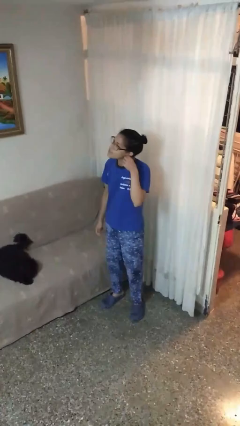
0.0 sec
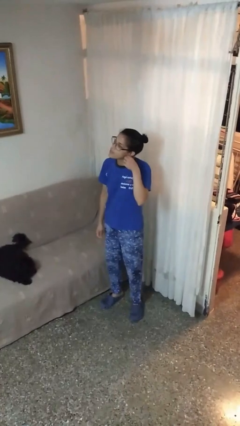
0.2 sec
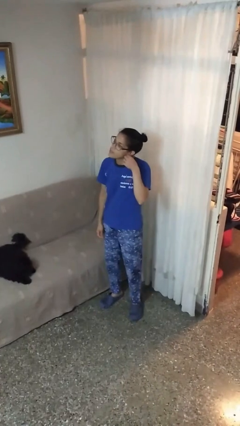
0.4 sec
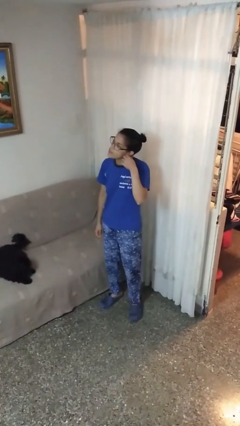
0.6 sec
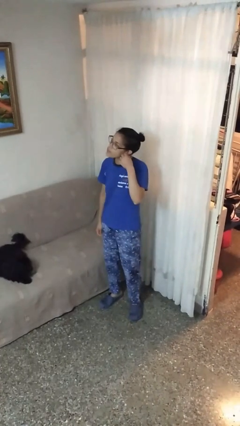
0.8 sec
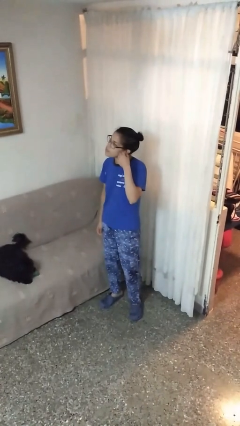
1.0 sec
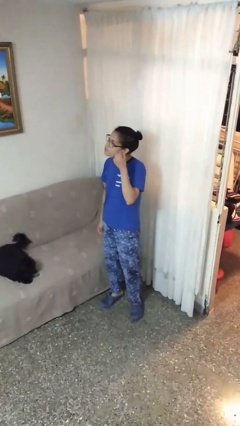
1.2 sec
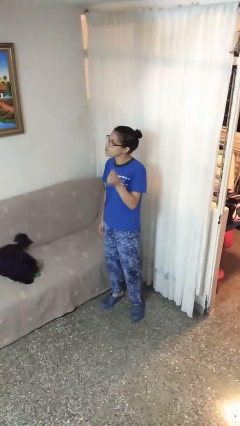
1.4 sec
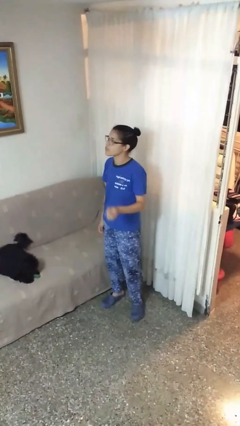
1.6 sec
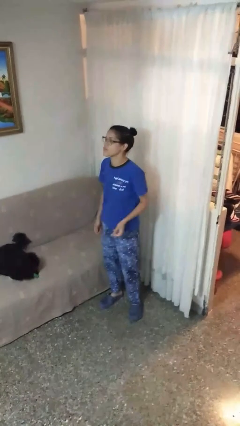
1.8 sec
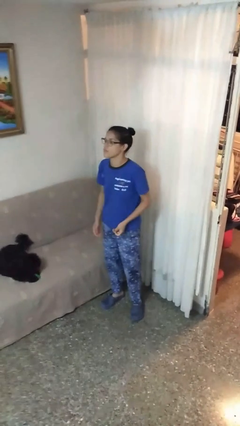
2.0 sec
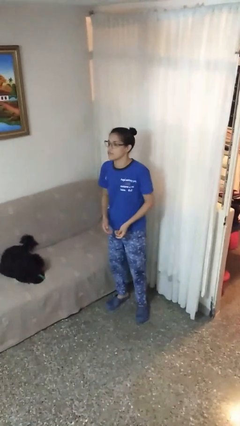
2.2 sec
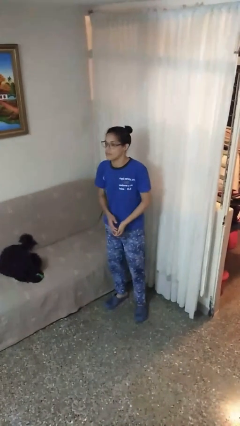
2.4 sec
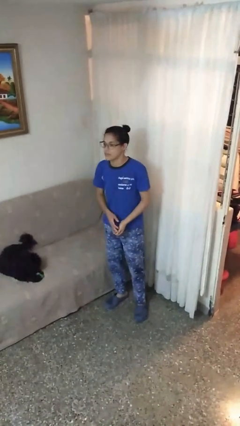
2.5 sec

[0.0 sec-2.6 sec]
person takes off earrings

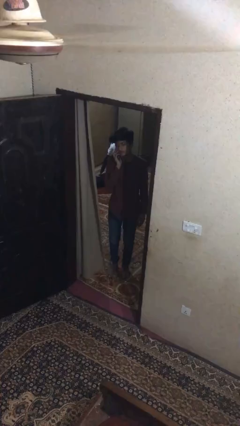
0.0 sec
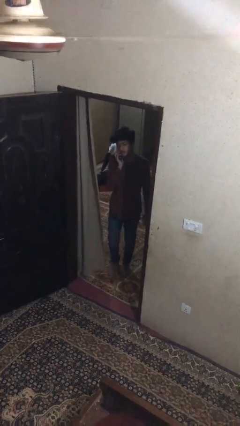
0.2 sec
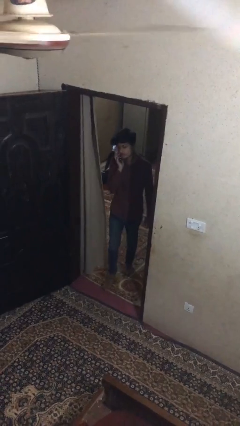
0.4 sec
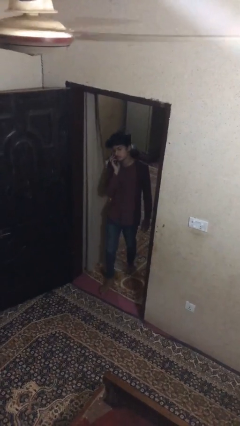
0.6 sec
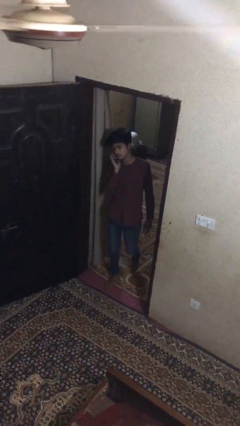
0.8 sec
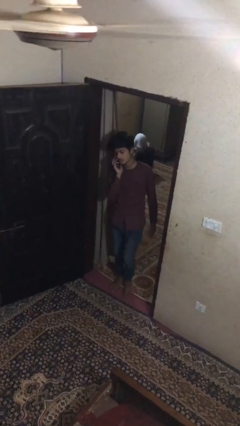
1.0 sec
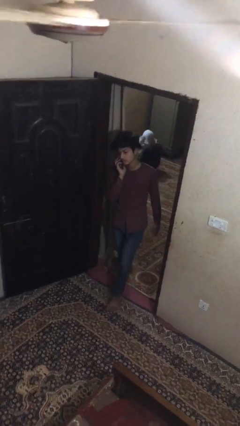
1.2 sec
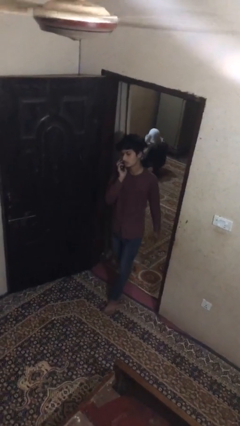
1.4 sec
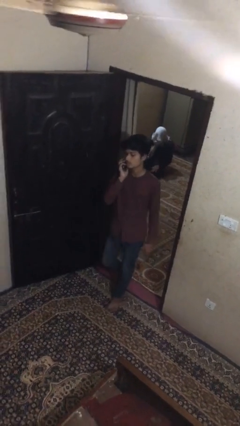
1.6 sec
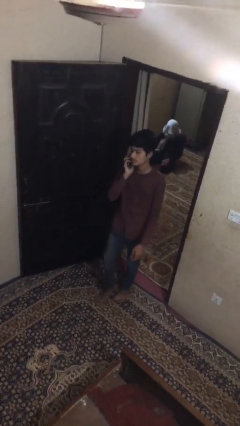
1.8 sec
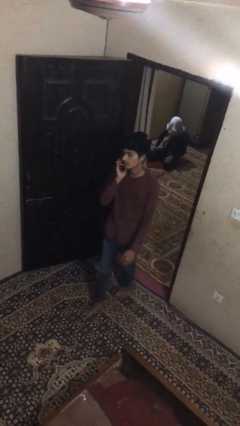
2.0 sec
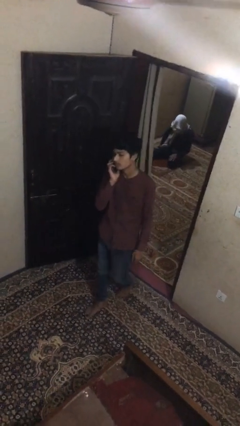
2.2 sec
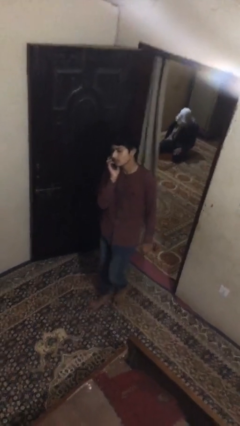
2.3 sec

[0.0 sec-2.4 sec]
person enters scene through structure

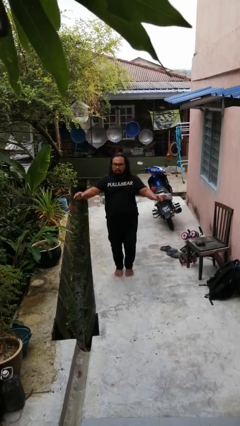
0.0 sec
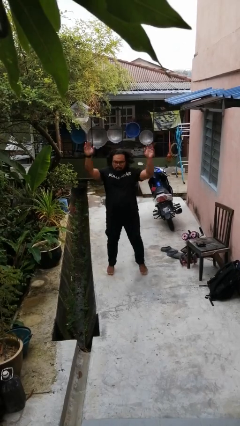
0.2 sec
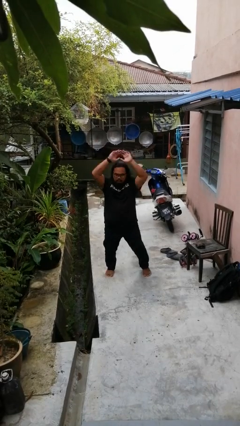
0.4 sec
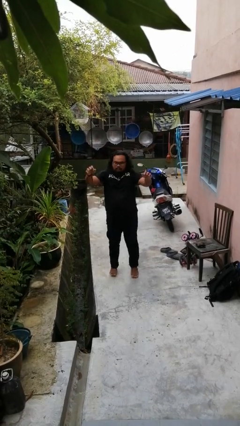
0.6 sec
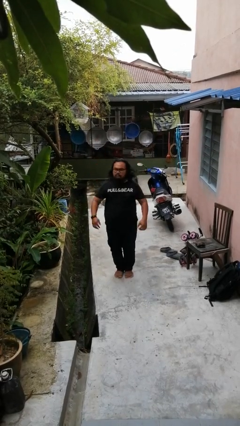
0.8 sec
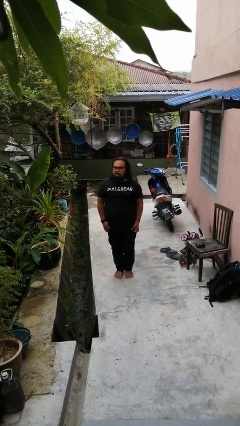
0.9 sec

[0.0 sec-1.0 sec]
person exercises with jumping jacks

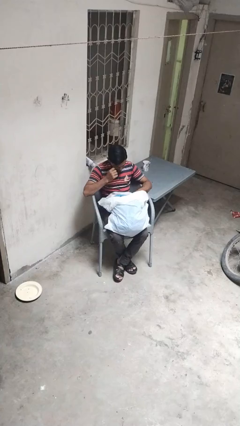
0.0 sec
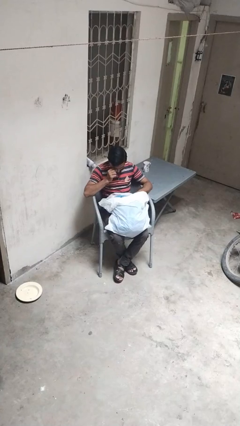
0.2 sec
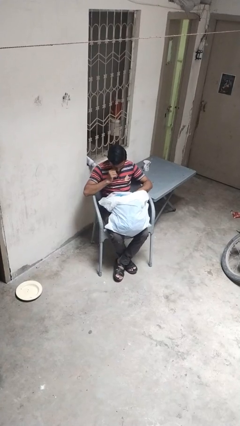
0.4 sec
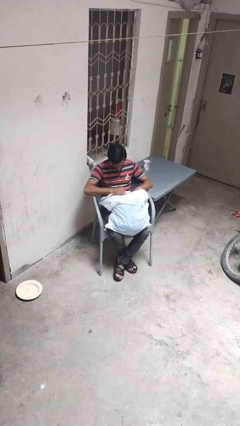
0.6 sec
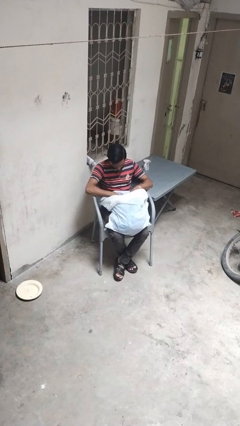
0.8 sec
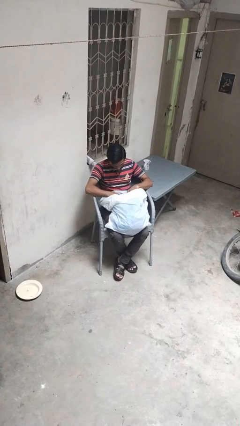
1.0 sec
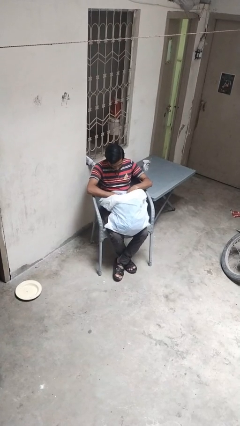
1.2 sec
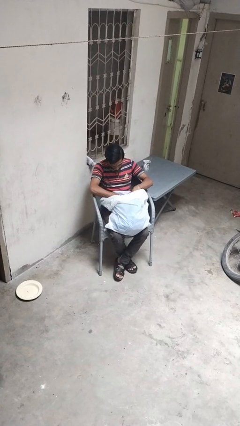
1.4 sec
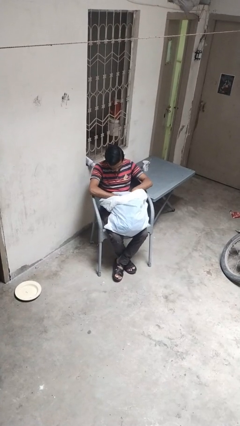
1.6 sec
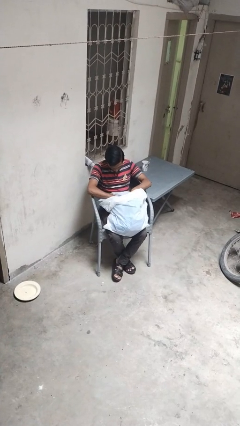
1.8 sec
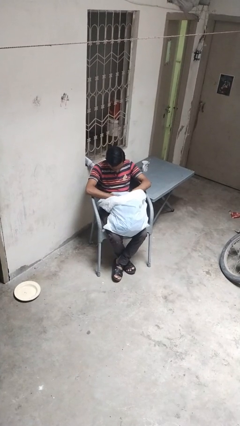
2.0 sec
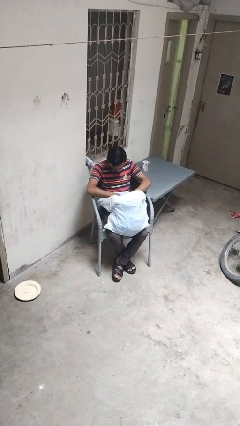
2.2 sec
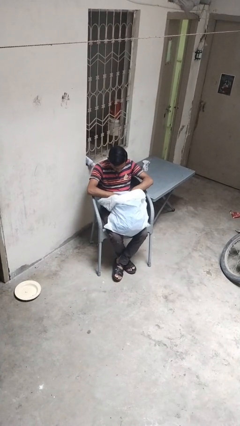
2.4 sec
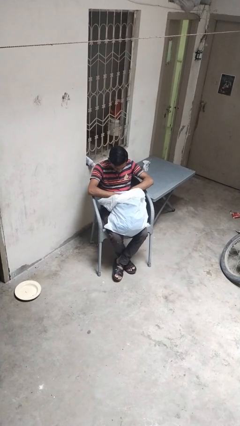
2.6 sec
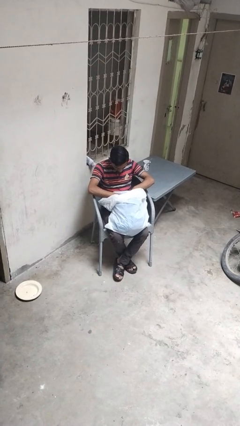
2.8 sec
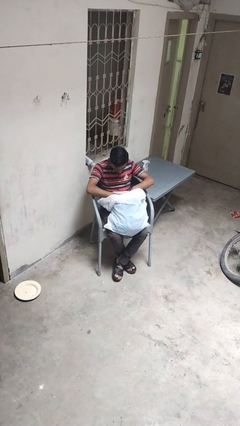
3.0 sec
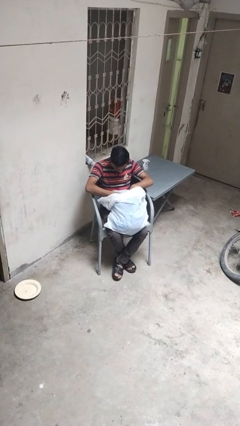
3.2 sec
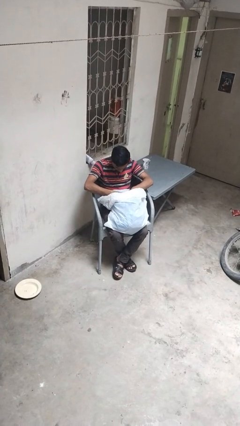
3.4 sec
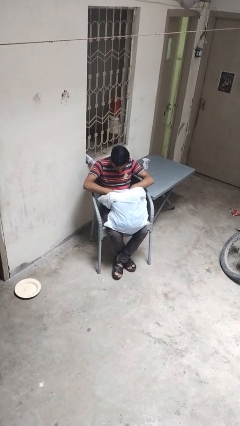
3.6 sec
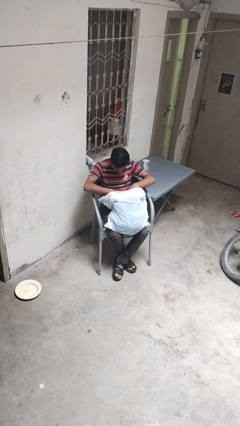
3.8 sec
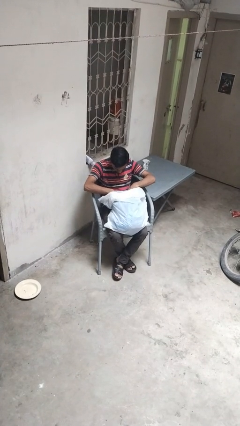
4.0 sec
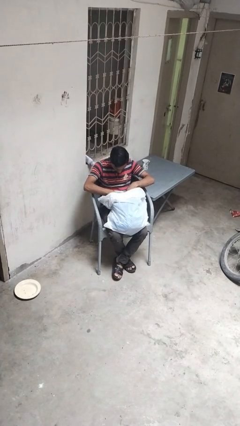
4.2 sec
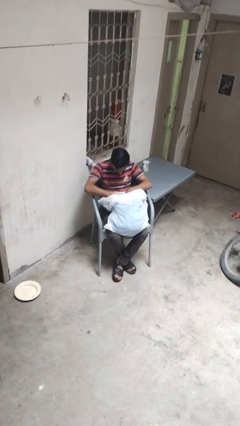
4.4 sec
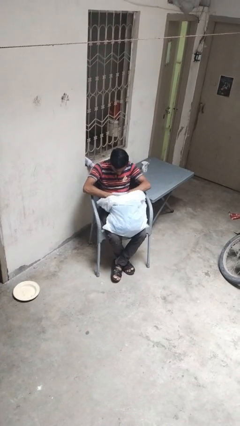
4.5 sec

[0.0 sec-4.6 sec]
person searches in bag

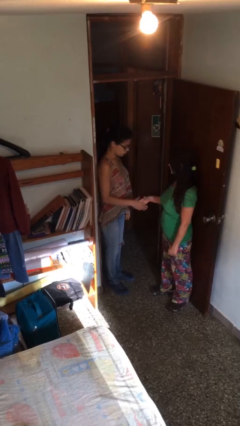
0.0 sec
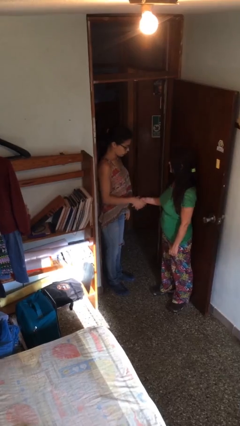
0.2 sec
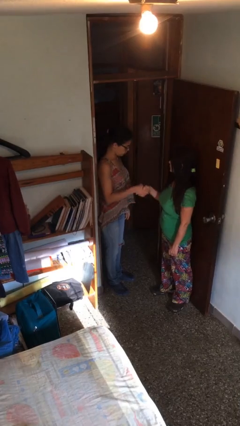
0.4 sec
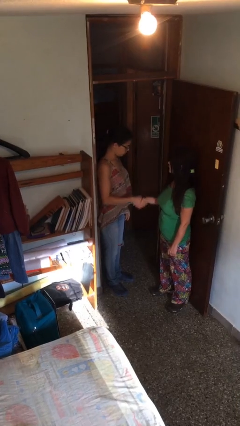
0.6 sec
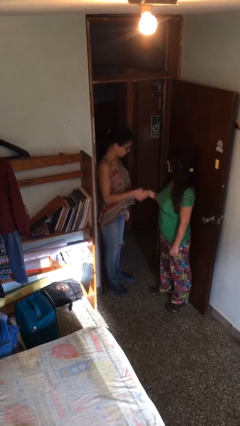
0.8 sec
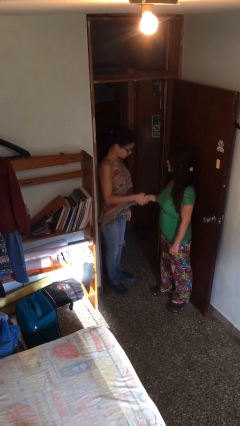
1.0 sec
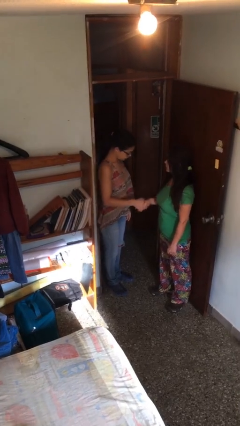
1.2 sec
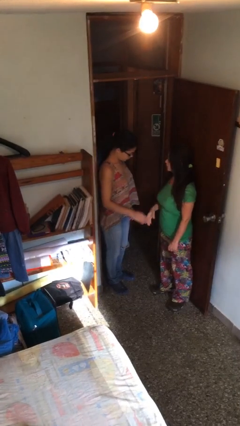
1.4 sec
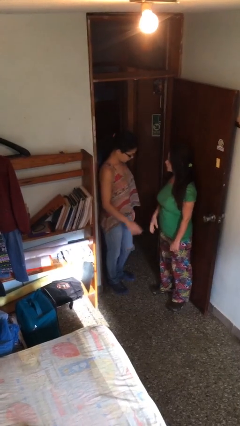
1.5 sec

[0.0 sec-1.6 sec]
person shakes hand

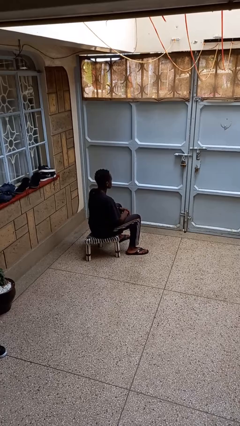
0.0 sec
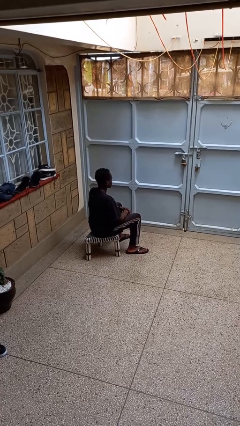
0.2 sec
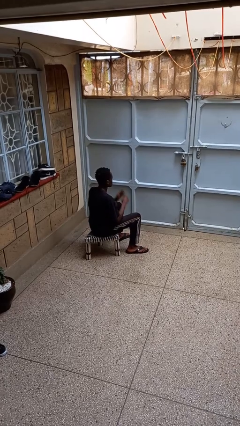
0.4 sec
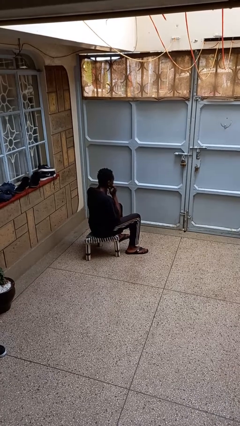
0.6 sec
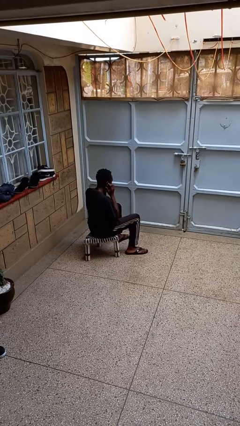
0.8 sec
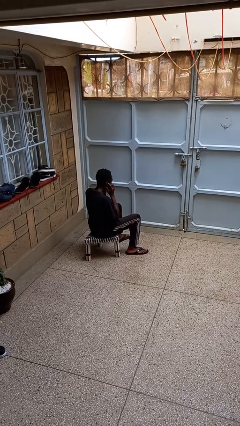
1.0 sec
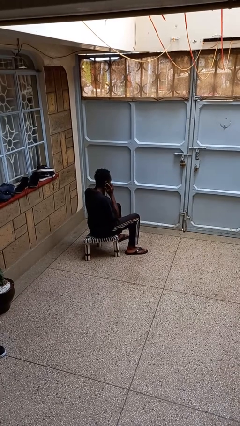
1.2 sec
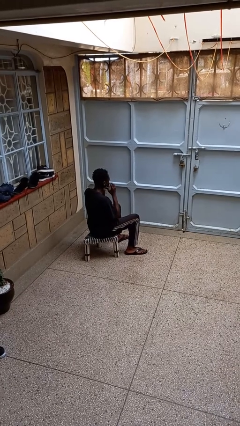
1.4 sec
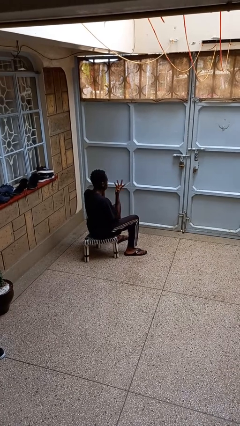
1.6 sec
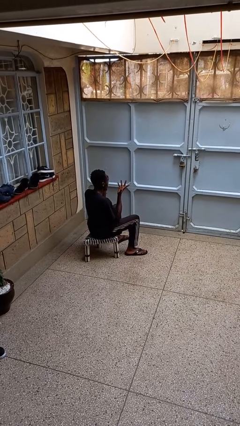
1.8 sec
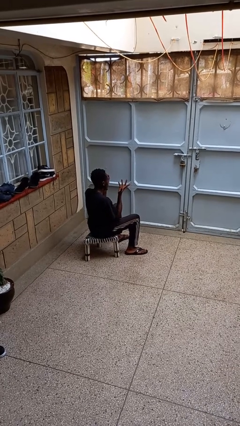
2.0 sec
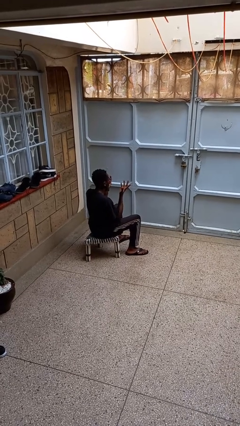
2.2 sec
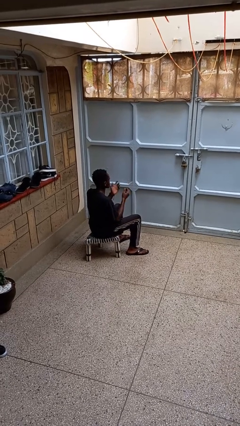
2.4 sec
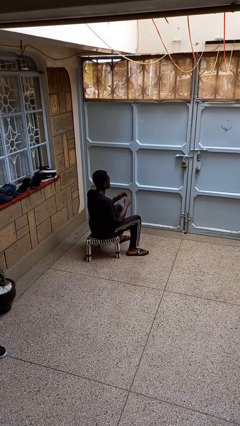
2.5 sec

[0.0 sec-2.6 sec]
person puts fingers in ear

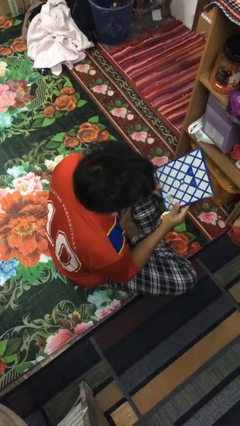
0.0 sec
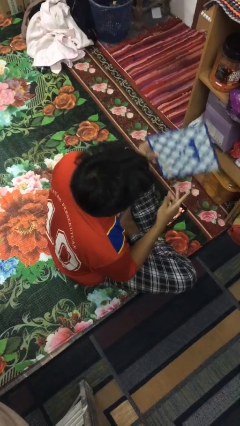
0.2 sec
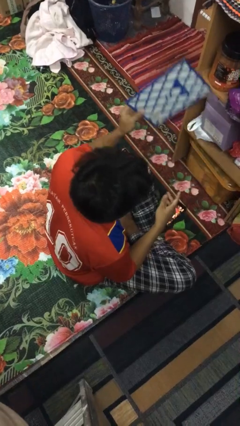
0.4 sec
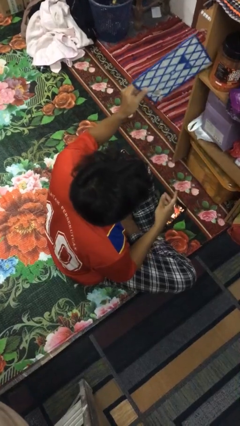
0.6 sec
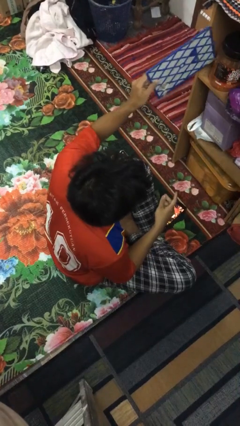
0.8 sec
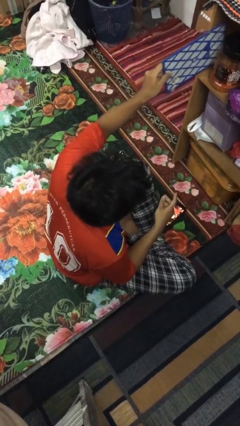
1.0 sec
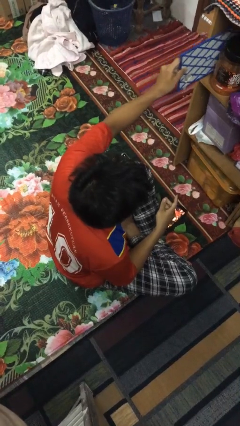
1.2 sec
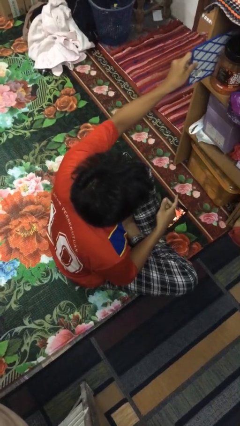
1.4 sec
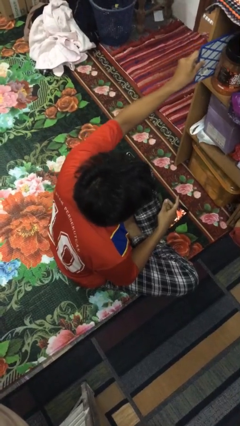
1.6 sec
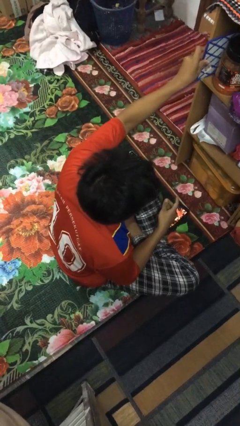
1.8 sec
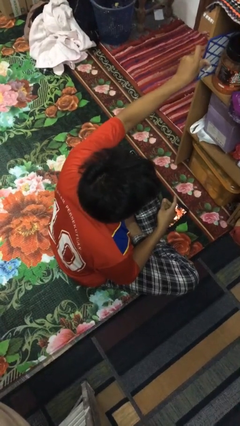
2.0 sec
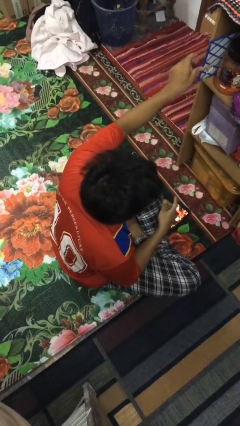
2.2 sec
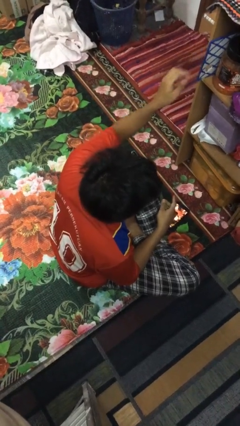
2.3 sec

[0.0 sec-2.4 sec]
person puts down object into cabinet
